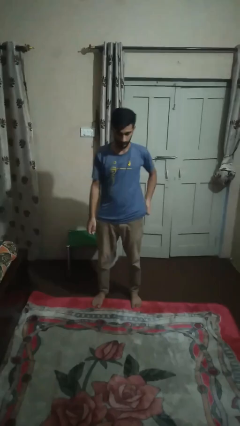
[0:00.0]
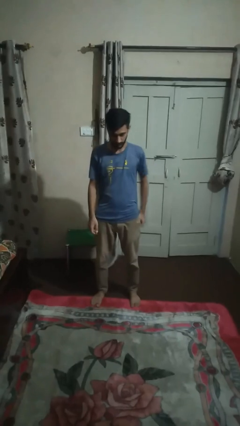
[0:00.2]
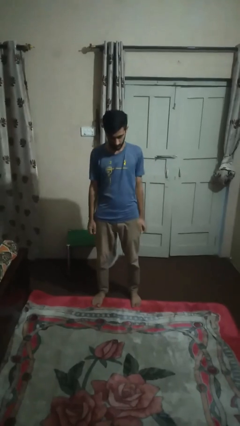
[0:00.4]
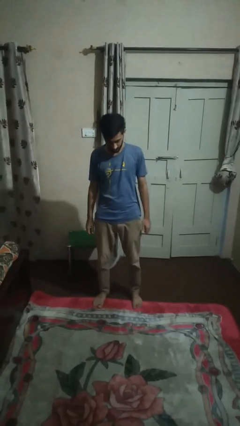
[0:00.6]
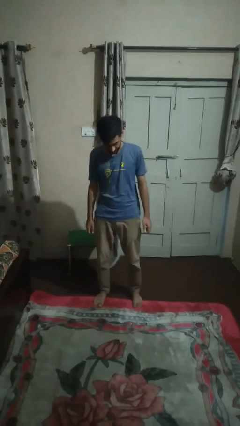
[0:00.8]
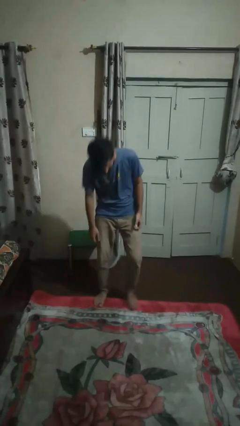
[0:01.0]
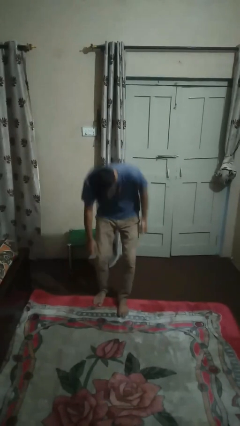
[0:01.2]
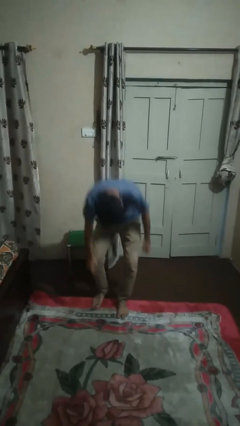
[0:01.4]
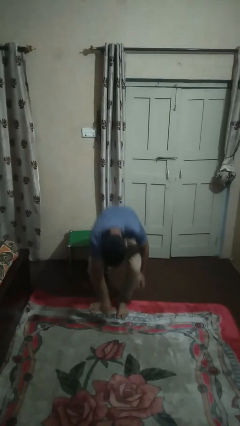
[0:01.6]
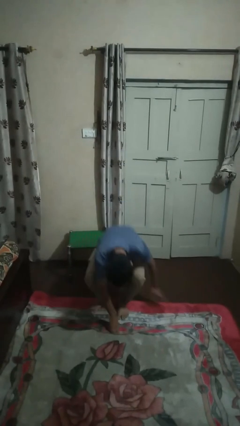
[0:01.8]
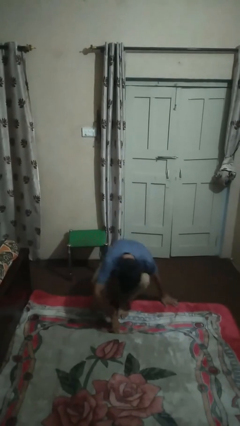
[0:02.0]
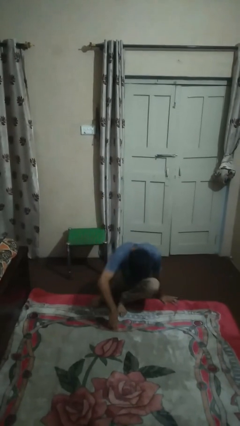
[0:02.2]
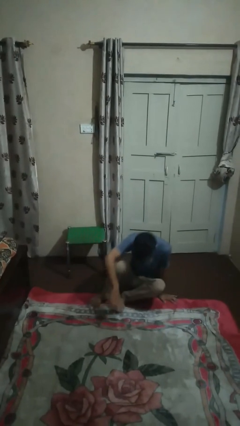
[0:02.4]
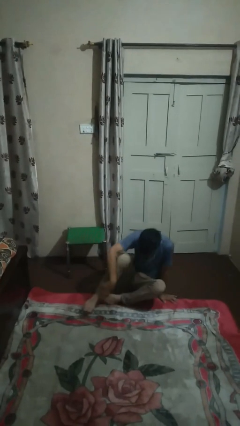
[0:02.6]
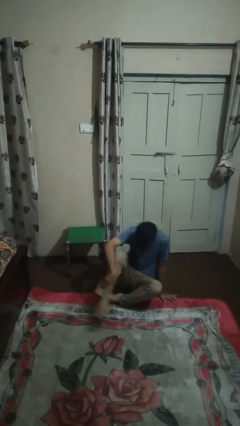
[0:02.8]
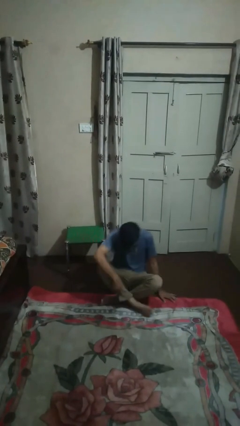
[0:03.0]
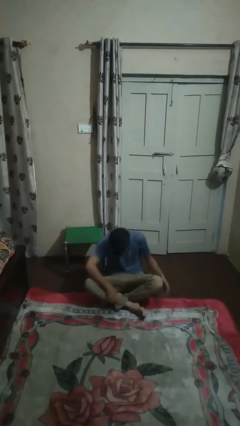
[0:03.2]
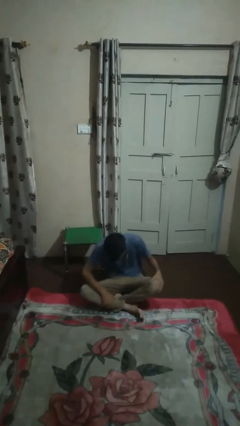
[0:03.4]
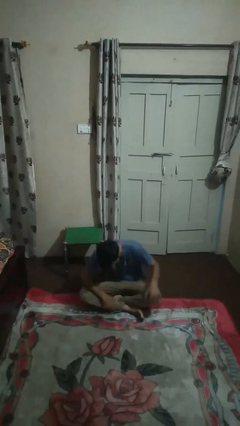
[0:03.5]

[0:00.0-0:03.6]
person sits crisscross

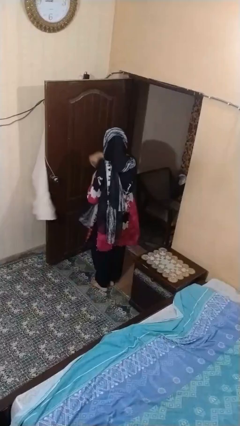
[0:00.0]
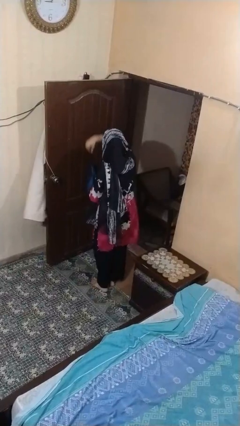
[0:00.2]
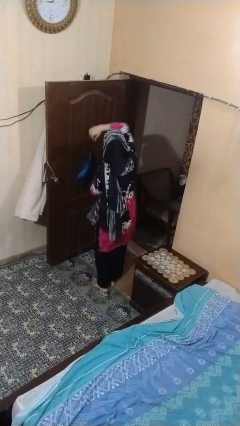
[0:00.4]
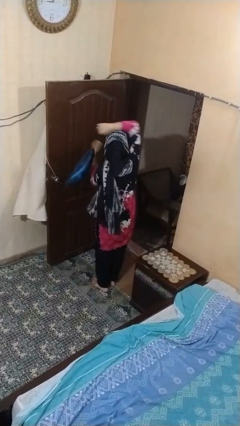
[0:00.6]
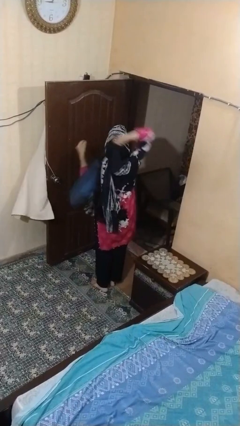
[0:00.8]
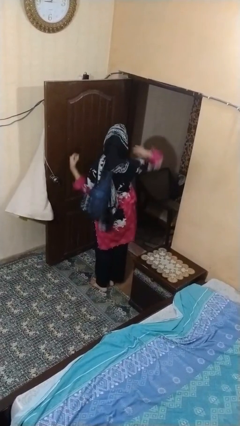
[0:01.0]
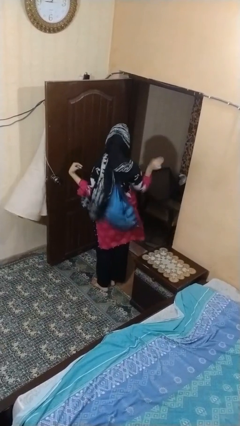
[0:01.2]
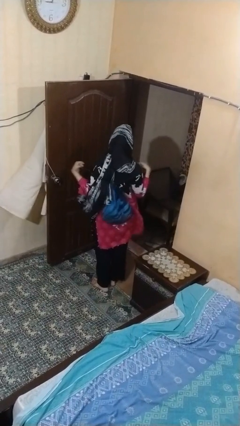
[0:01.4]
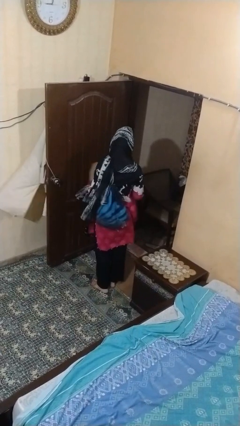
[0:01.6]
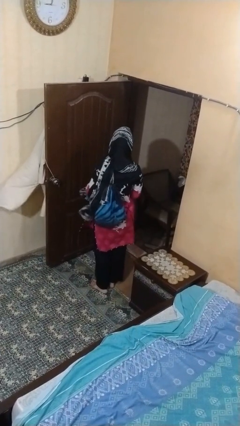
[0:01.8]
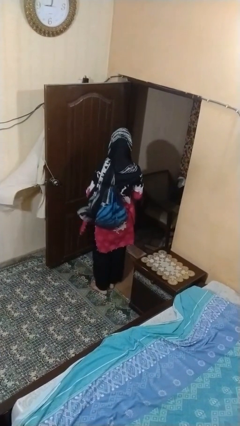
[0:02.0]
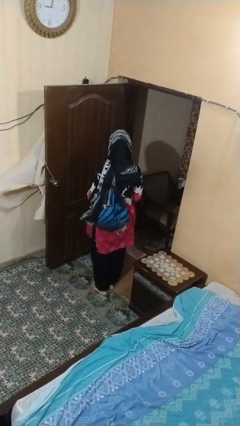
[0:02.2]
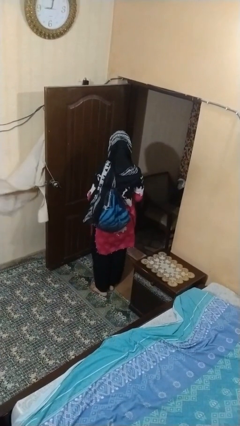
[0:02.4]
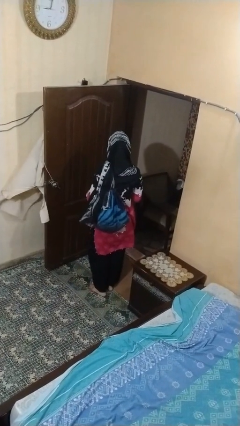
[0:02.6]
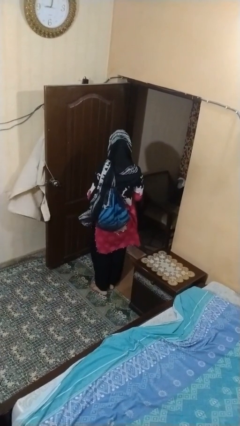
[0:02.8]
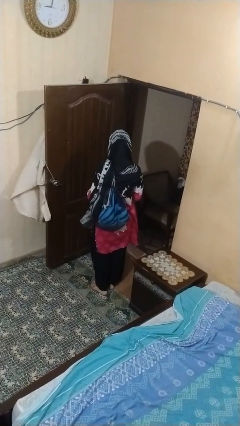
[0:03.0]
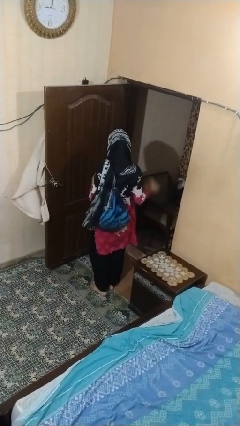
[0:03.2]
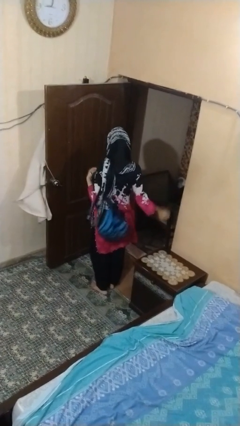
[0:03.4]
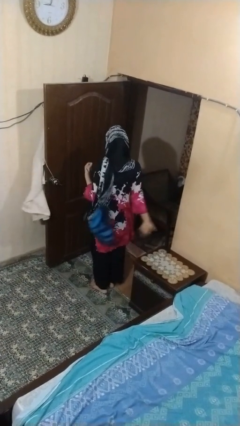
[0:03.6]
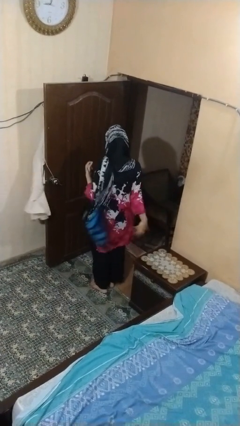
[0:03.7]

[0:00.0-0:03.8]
person puts on backpack

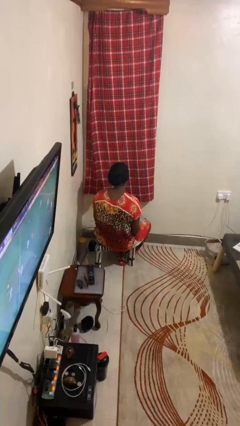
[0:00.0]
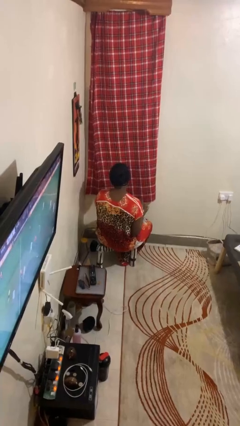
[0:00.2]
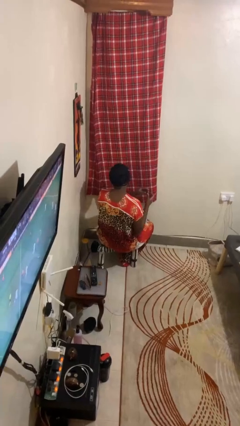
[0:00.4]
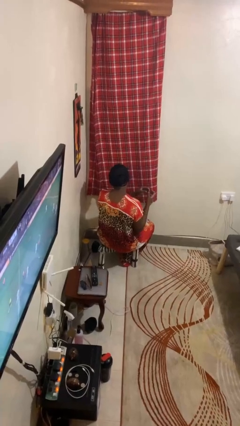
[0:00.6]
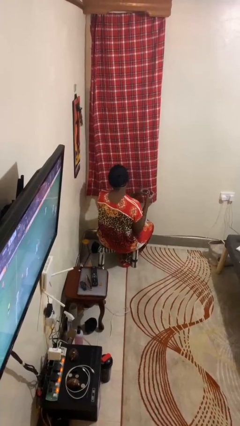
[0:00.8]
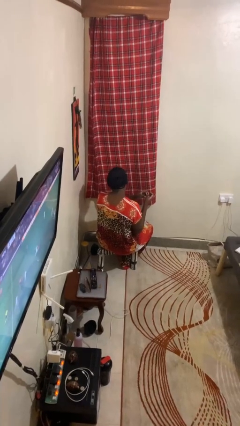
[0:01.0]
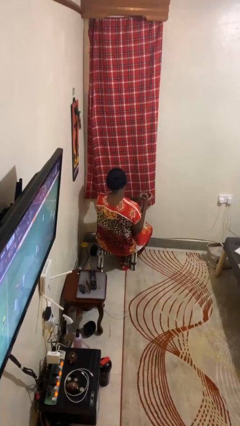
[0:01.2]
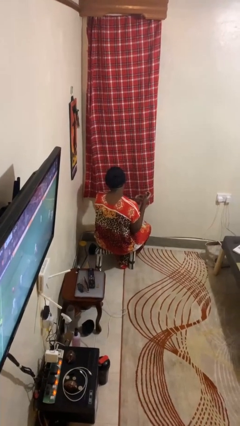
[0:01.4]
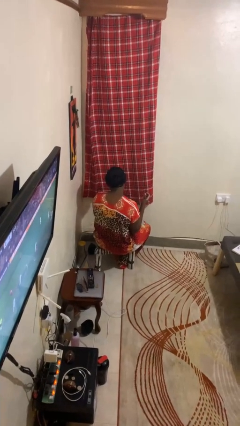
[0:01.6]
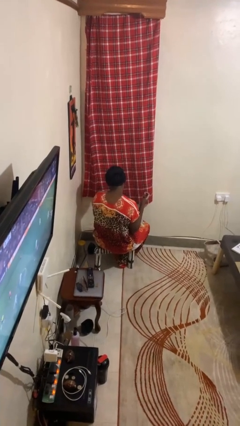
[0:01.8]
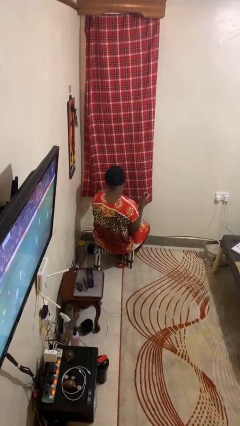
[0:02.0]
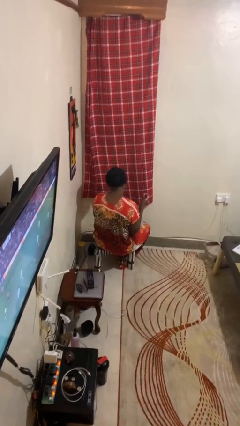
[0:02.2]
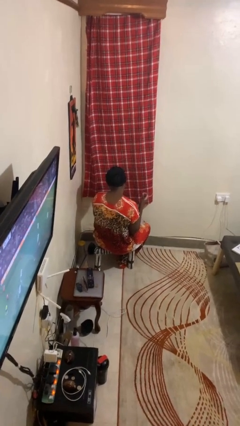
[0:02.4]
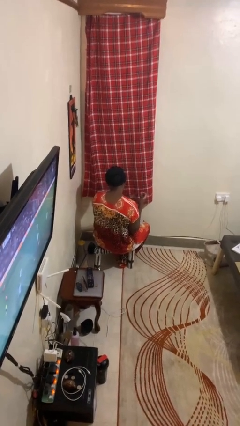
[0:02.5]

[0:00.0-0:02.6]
person puts on ring

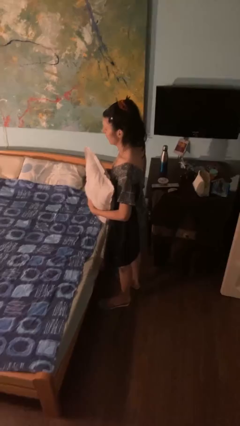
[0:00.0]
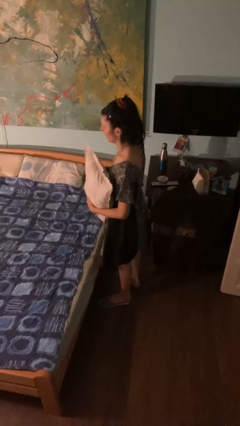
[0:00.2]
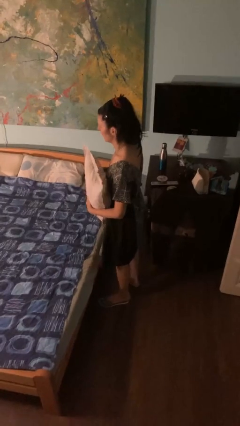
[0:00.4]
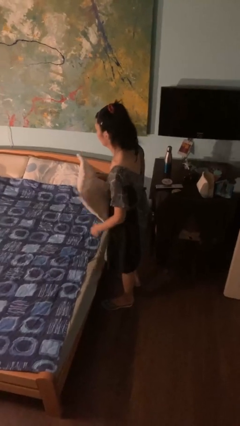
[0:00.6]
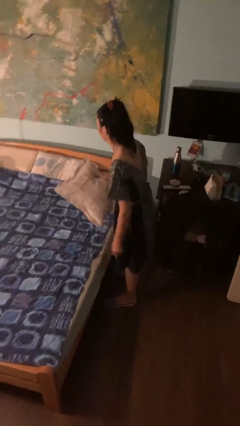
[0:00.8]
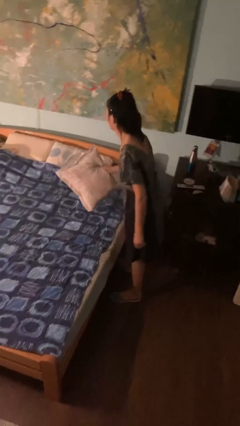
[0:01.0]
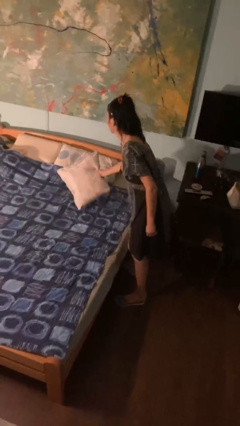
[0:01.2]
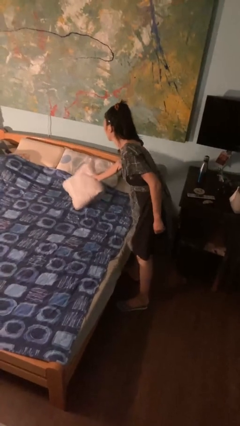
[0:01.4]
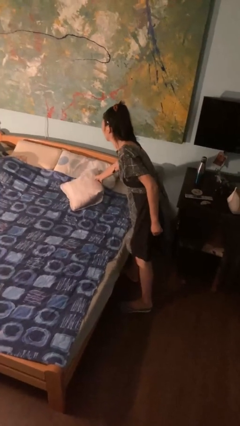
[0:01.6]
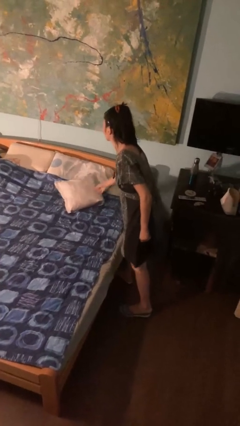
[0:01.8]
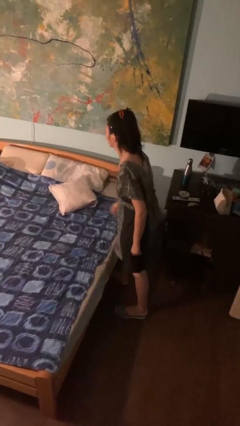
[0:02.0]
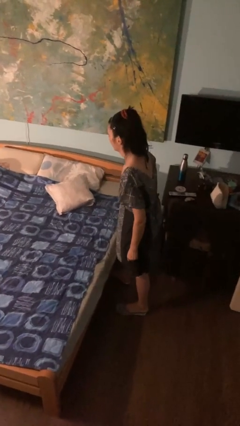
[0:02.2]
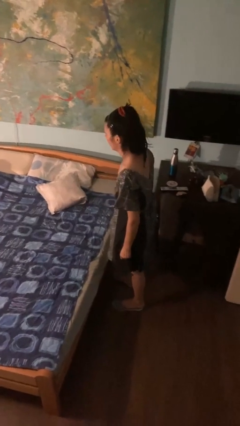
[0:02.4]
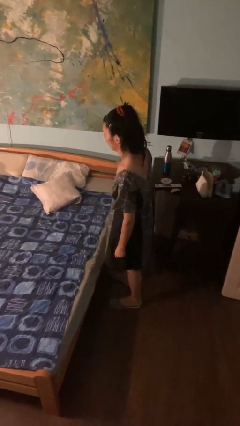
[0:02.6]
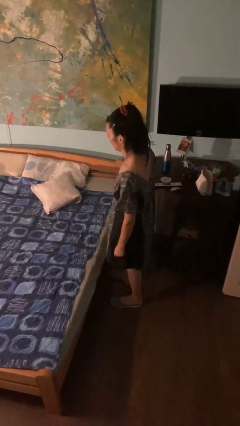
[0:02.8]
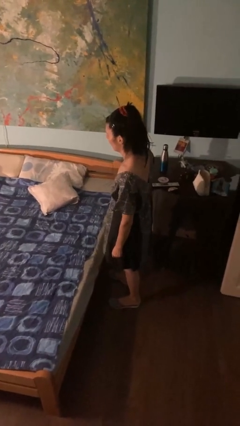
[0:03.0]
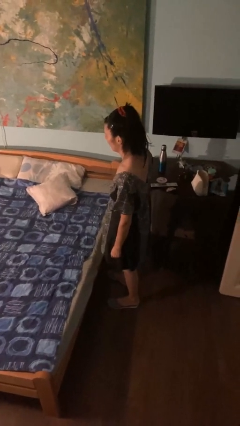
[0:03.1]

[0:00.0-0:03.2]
person puts down object on bed

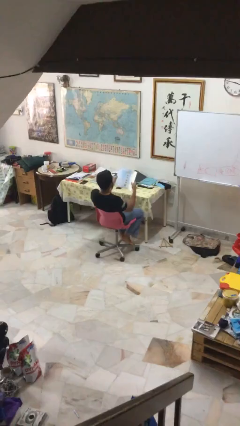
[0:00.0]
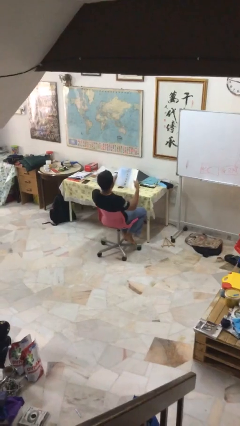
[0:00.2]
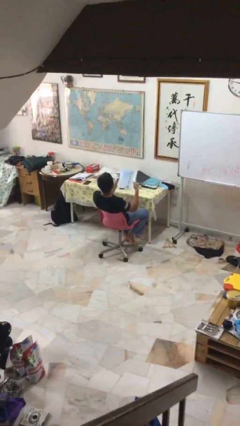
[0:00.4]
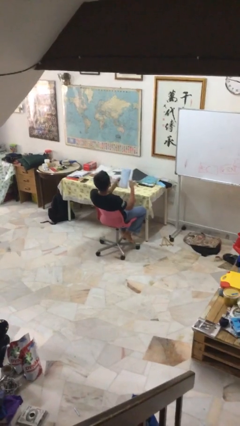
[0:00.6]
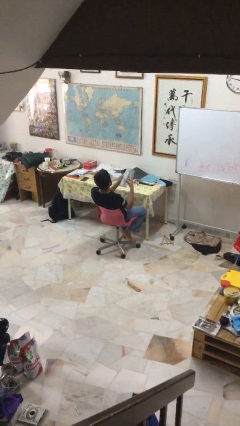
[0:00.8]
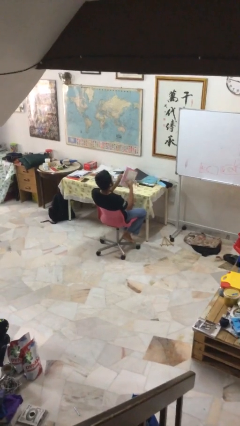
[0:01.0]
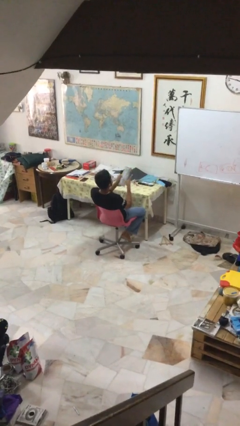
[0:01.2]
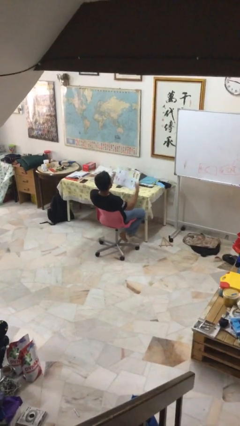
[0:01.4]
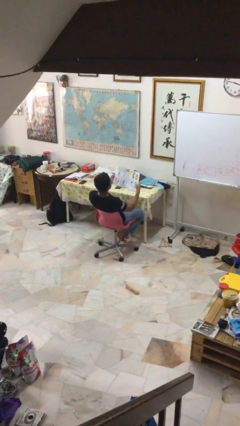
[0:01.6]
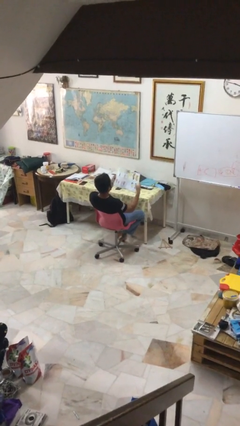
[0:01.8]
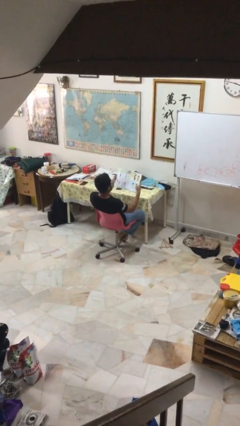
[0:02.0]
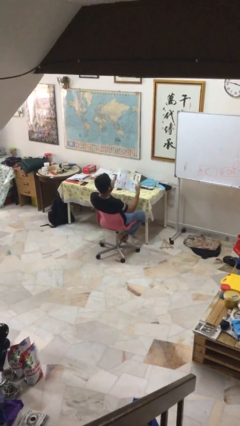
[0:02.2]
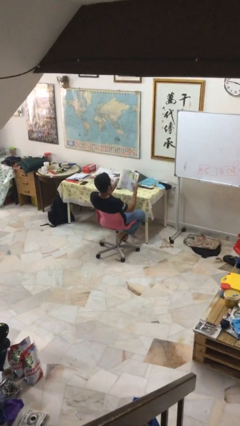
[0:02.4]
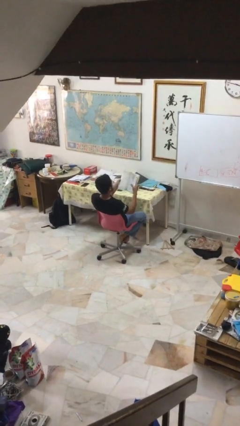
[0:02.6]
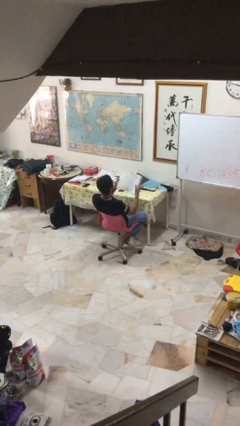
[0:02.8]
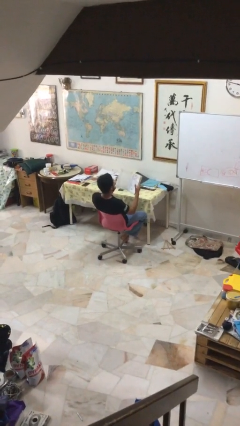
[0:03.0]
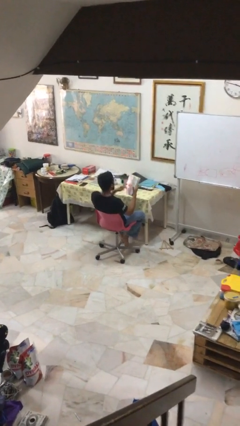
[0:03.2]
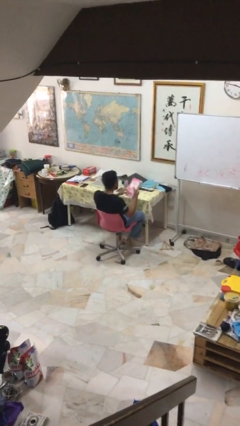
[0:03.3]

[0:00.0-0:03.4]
person reads document

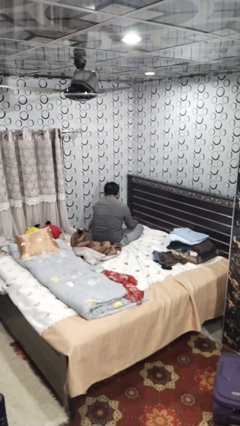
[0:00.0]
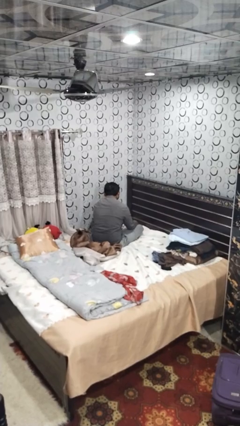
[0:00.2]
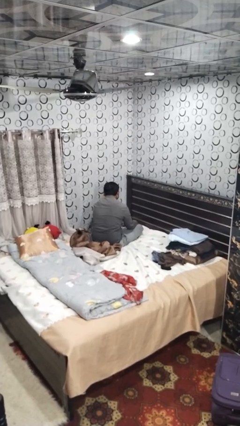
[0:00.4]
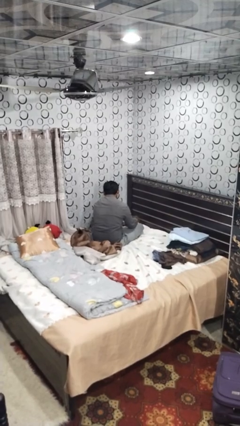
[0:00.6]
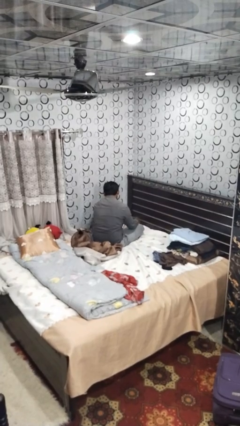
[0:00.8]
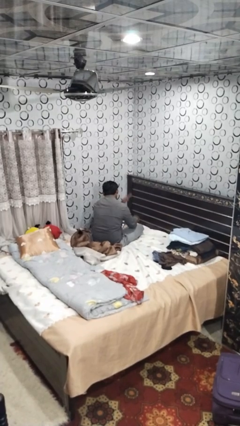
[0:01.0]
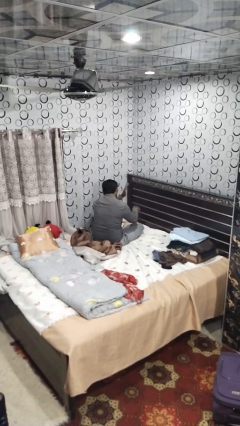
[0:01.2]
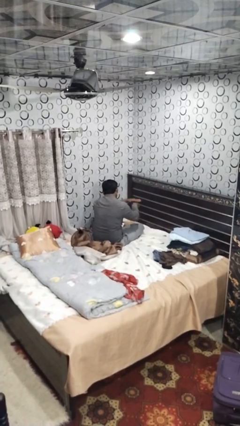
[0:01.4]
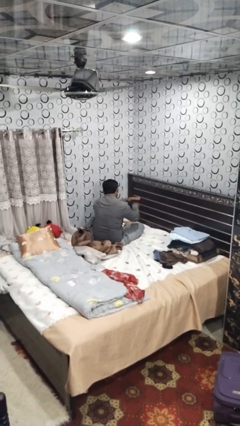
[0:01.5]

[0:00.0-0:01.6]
person swats bug
